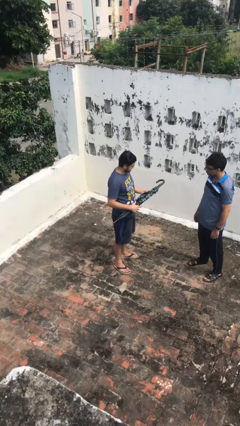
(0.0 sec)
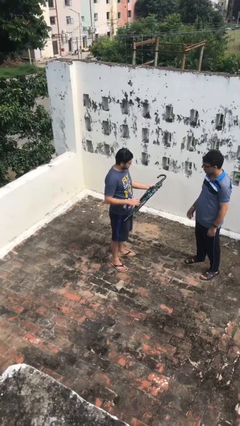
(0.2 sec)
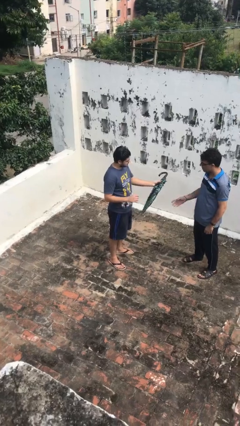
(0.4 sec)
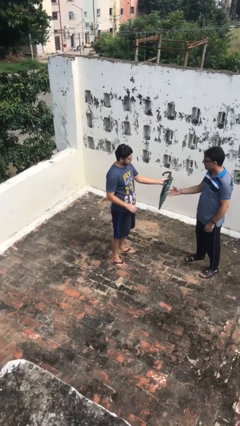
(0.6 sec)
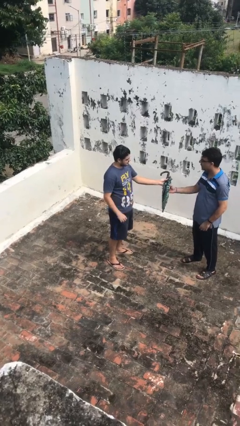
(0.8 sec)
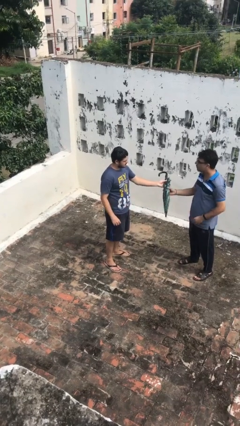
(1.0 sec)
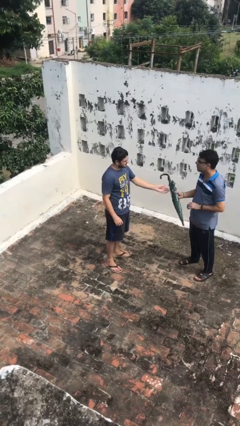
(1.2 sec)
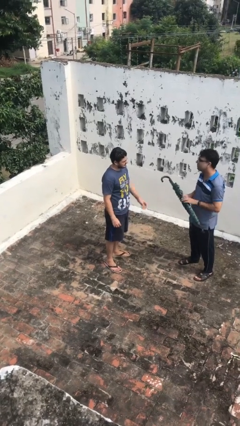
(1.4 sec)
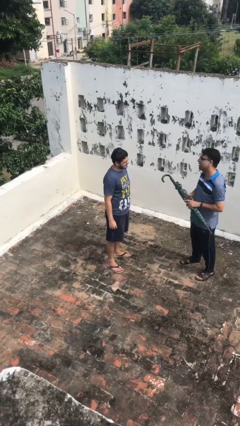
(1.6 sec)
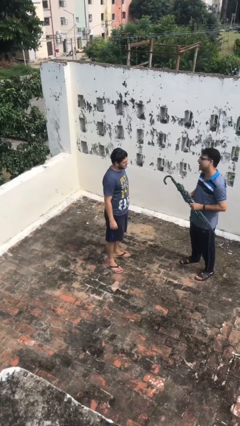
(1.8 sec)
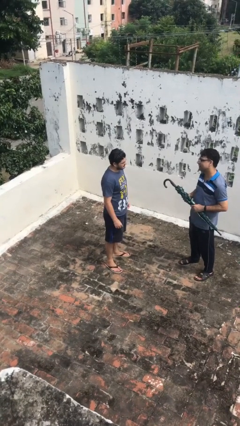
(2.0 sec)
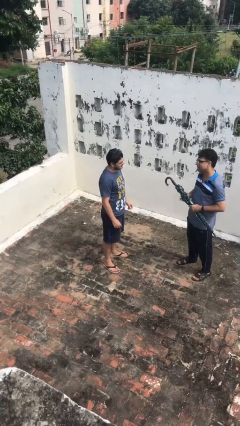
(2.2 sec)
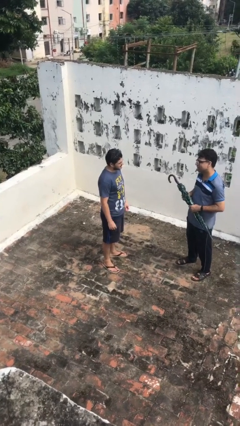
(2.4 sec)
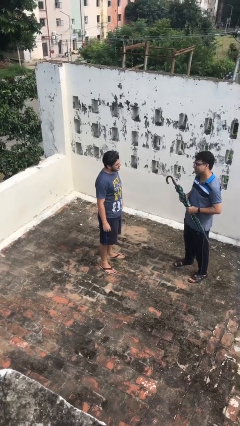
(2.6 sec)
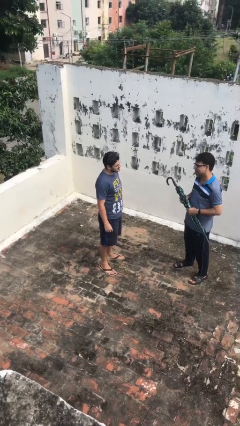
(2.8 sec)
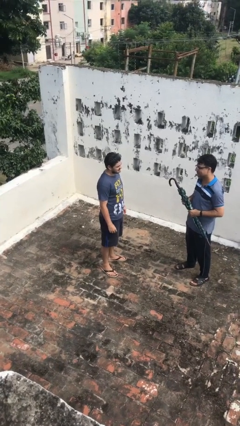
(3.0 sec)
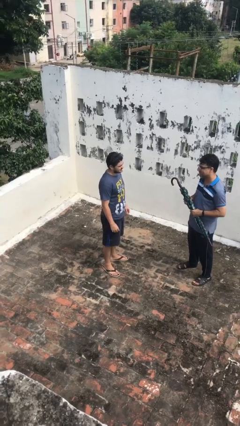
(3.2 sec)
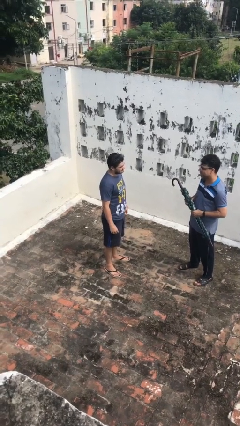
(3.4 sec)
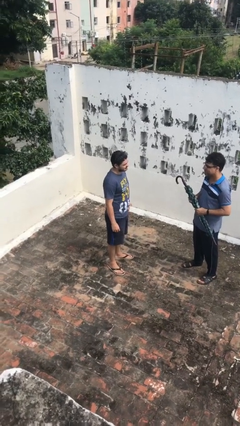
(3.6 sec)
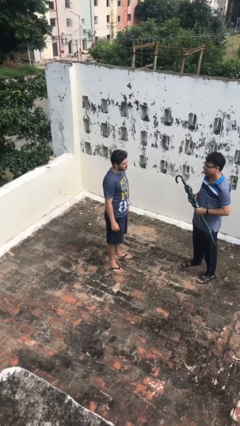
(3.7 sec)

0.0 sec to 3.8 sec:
person transfers object to person

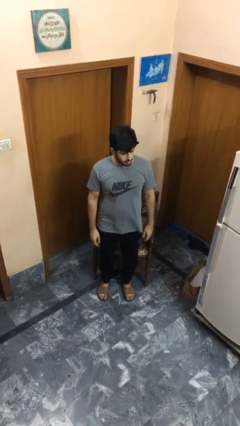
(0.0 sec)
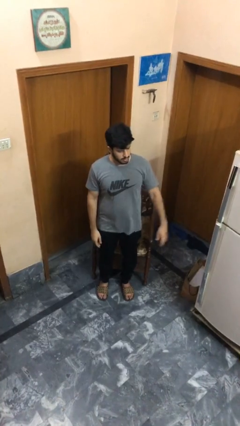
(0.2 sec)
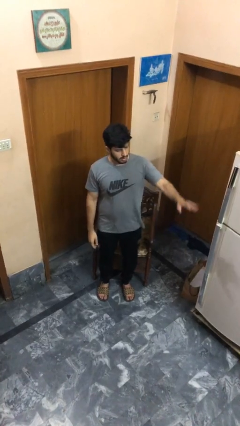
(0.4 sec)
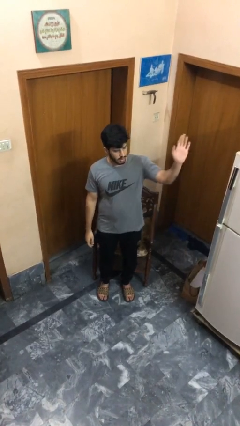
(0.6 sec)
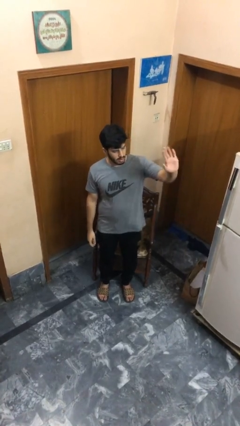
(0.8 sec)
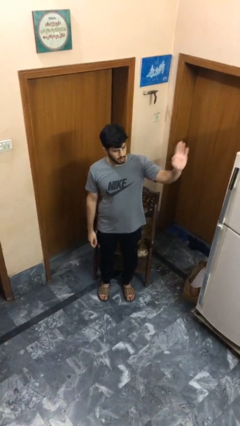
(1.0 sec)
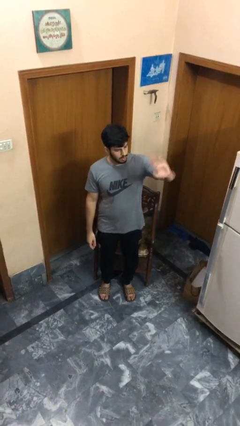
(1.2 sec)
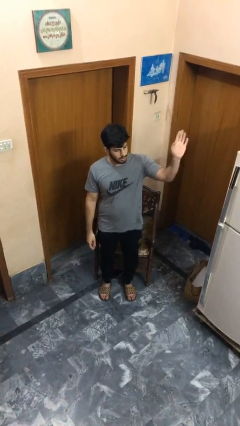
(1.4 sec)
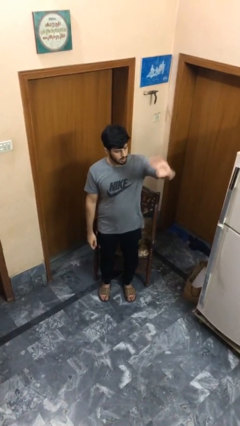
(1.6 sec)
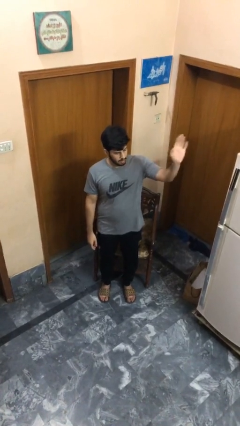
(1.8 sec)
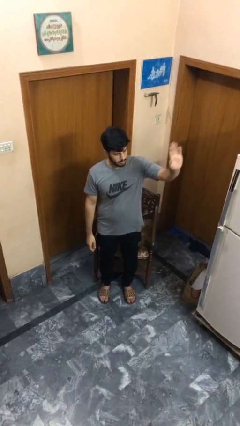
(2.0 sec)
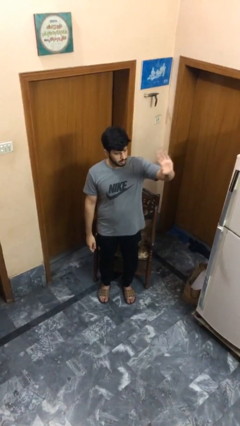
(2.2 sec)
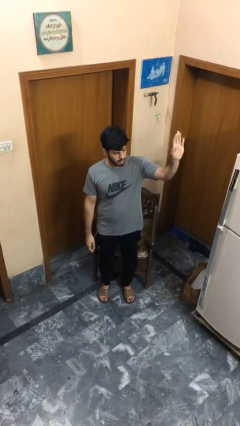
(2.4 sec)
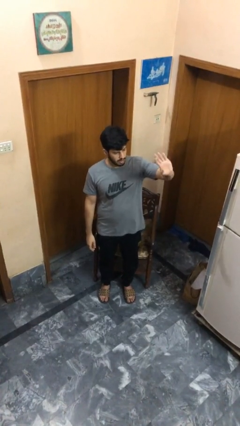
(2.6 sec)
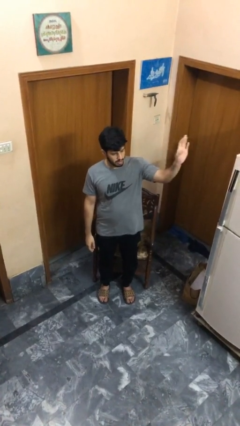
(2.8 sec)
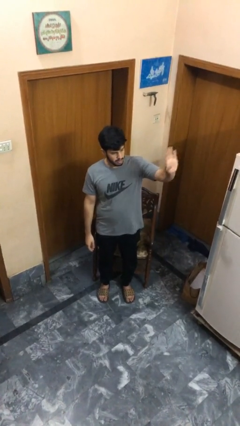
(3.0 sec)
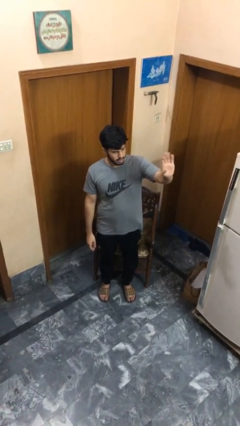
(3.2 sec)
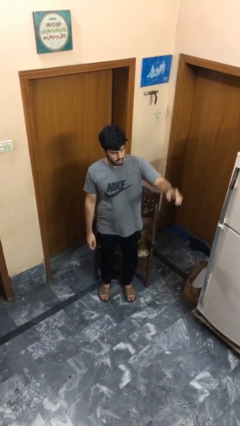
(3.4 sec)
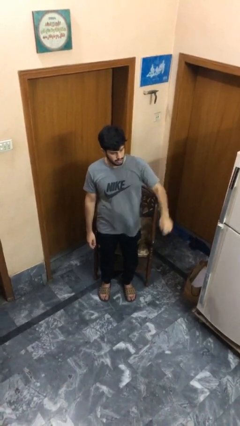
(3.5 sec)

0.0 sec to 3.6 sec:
person waves at person

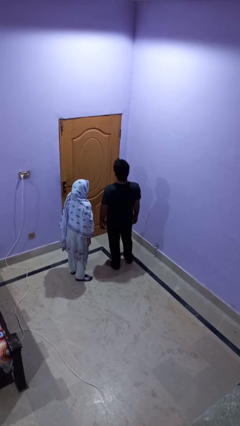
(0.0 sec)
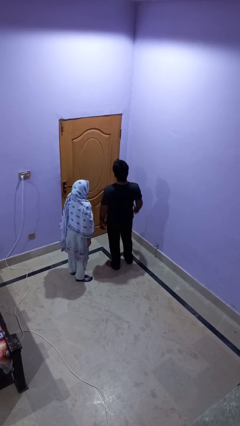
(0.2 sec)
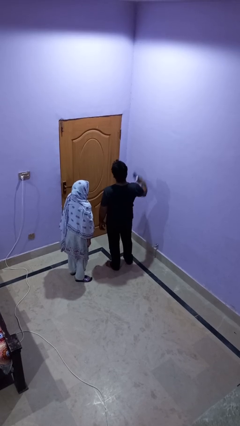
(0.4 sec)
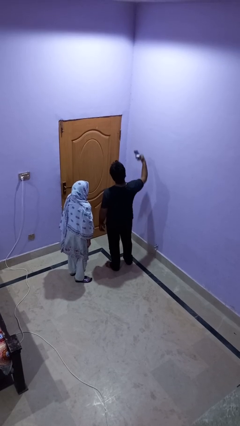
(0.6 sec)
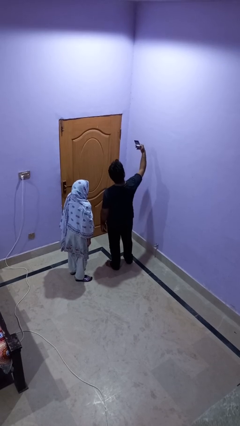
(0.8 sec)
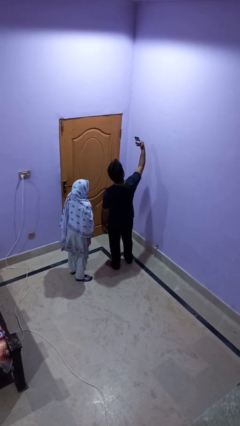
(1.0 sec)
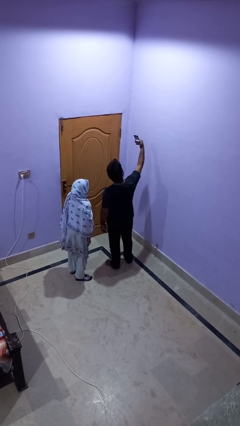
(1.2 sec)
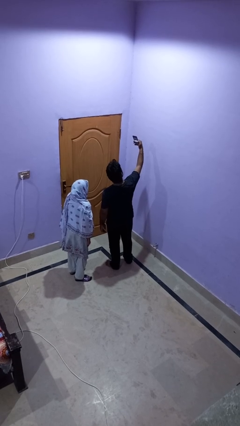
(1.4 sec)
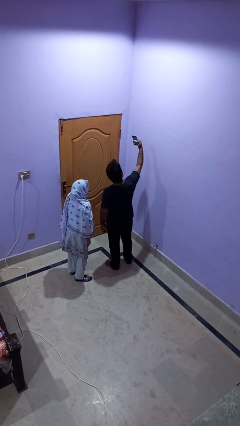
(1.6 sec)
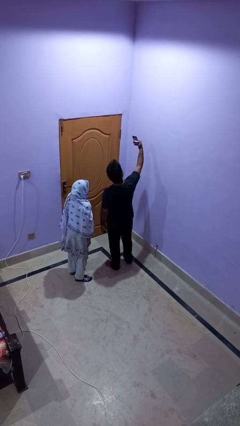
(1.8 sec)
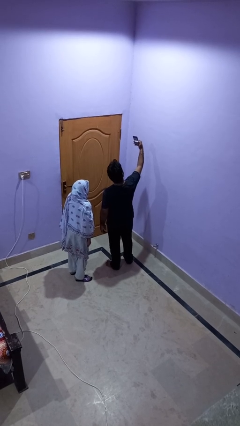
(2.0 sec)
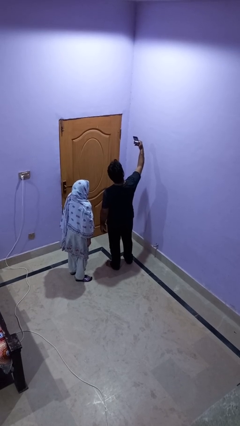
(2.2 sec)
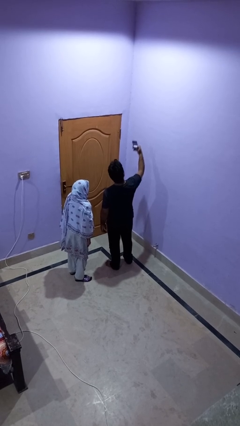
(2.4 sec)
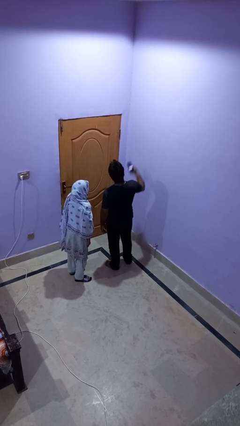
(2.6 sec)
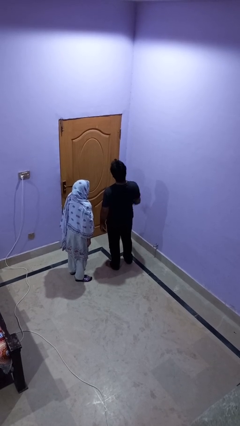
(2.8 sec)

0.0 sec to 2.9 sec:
person takes selfie with person

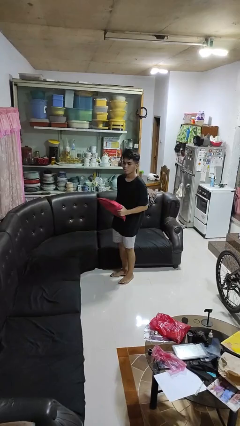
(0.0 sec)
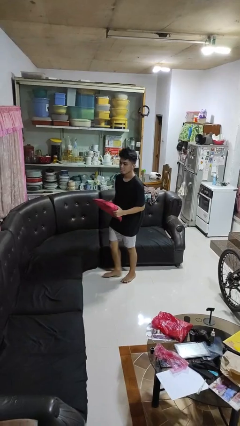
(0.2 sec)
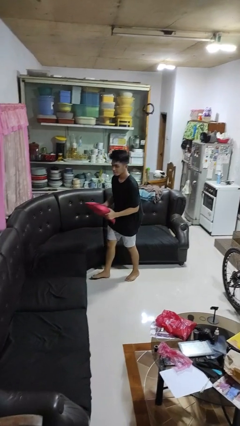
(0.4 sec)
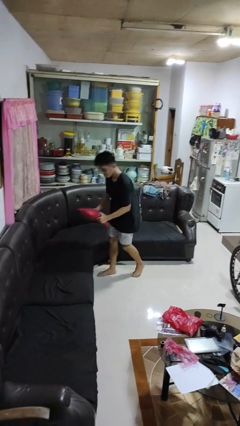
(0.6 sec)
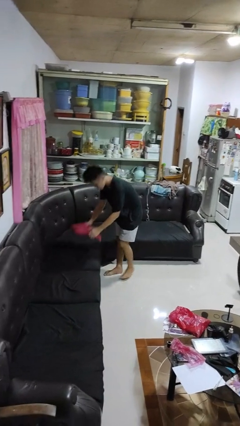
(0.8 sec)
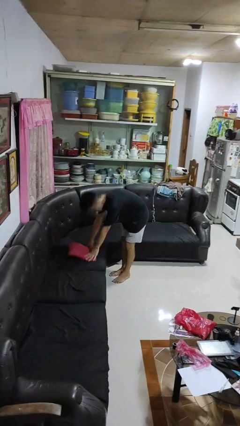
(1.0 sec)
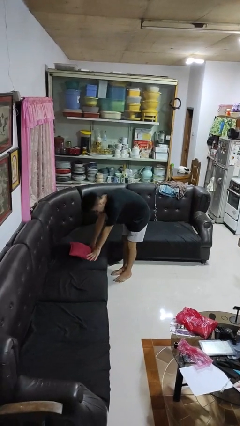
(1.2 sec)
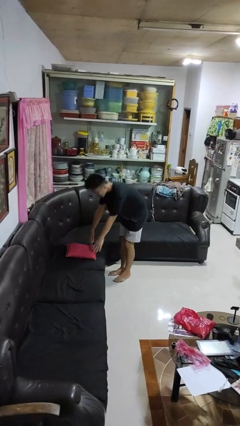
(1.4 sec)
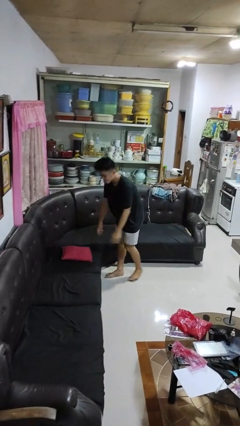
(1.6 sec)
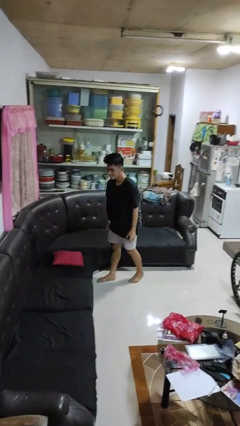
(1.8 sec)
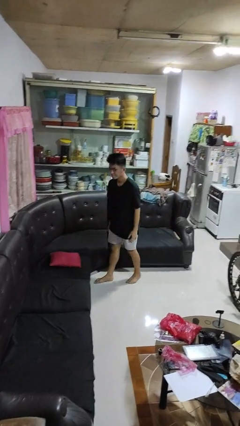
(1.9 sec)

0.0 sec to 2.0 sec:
person puts down object on couch

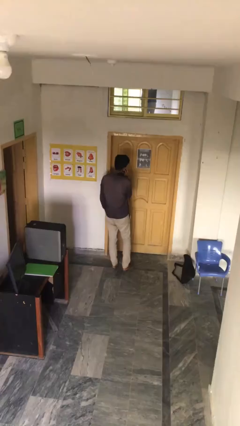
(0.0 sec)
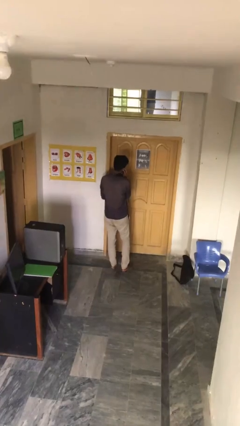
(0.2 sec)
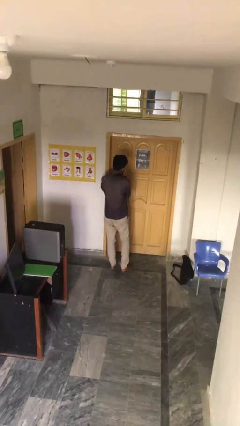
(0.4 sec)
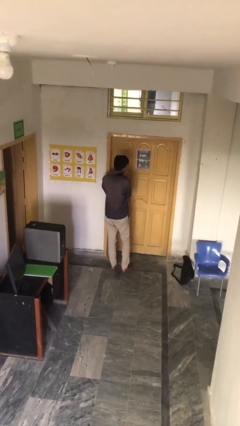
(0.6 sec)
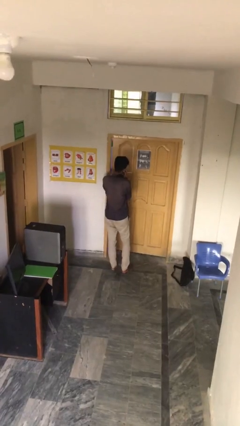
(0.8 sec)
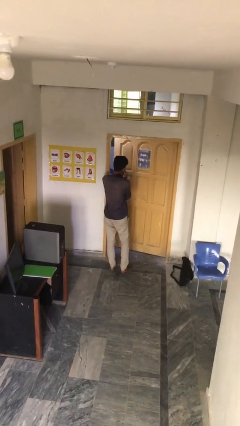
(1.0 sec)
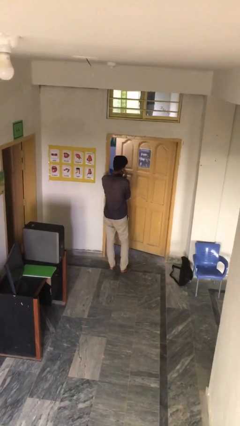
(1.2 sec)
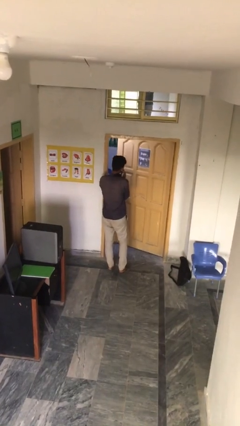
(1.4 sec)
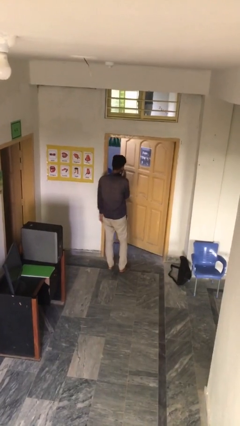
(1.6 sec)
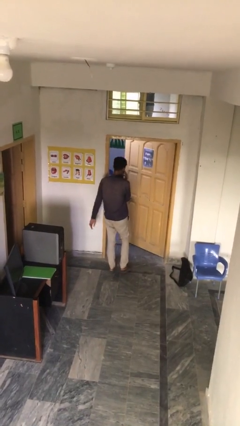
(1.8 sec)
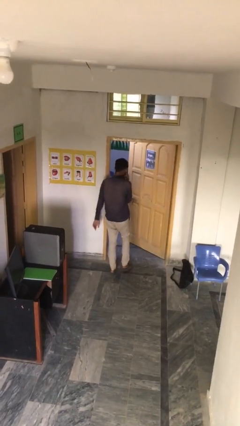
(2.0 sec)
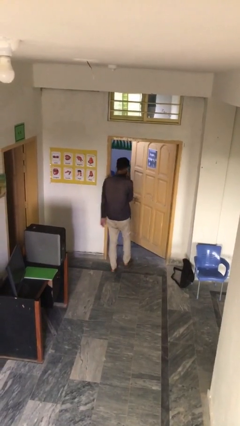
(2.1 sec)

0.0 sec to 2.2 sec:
person opens facility door

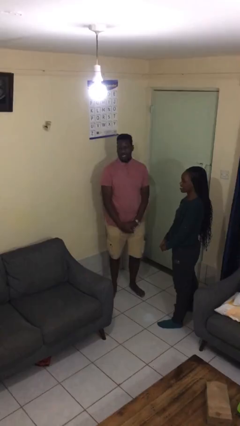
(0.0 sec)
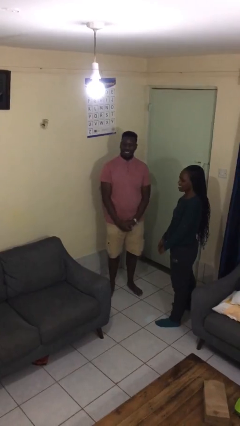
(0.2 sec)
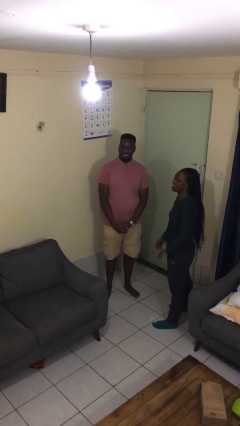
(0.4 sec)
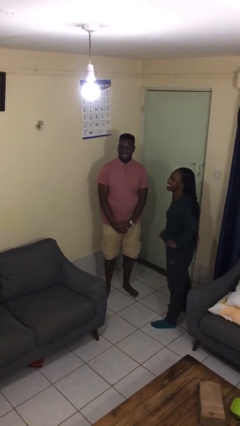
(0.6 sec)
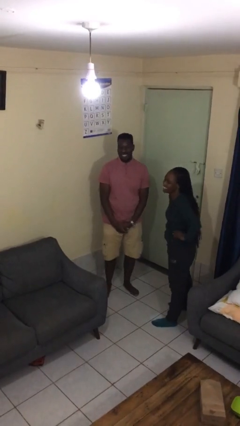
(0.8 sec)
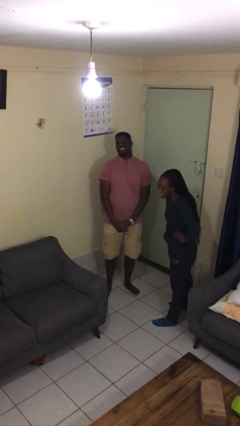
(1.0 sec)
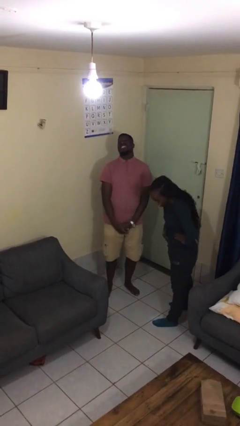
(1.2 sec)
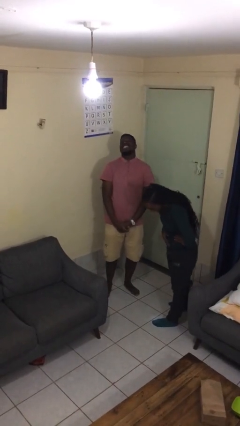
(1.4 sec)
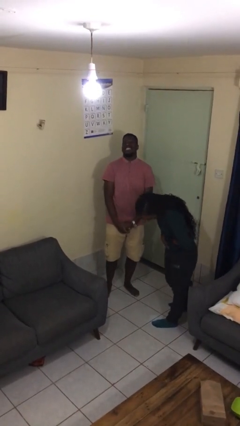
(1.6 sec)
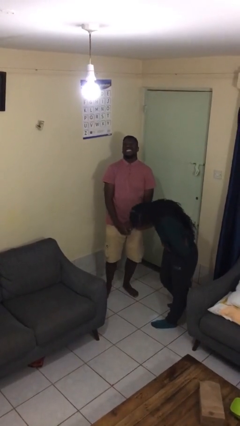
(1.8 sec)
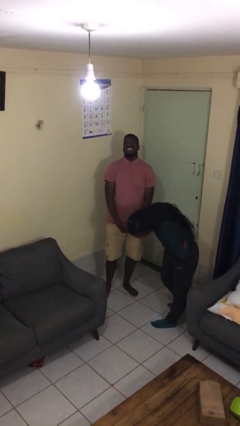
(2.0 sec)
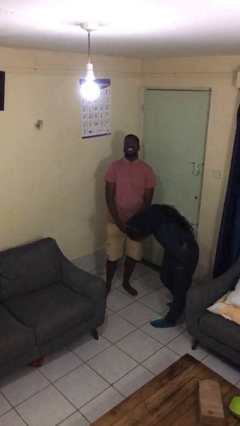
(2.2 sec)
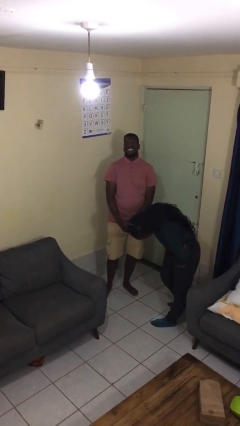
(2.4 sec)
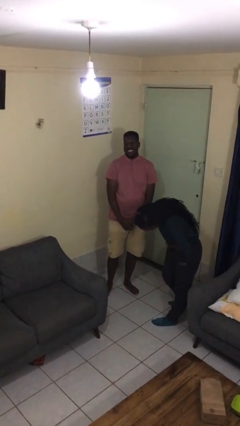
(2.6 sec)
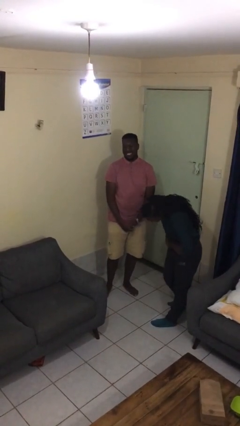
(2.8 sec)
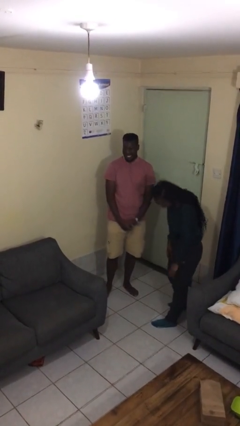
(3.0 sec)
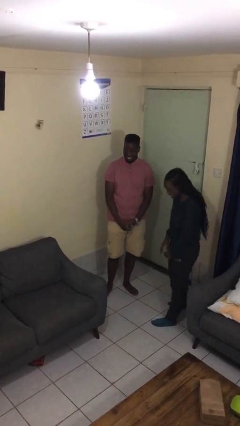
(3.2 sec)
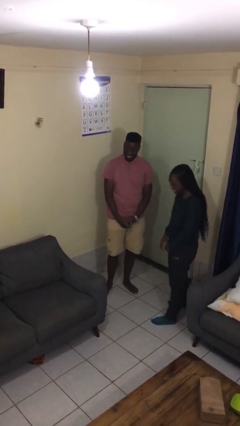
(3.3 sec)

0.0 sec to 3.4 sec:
person laughs with person
